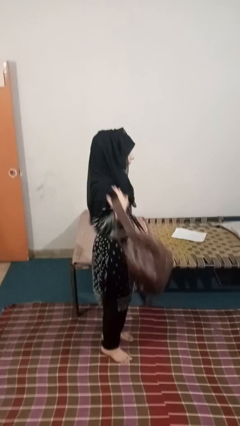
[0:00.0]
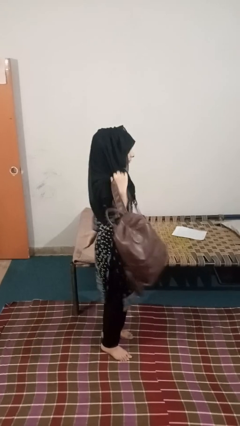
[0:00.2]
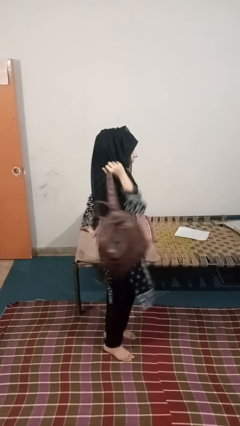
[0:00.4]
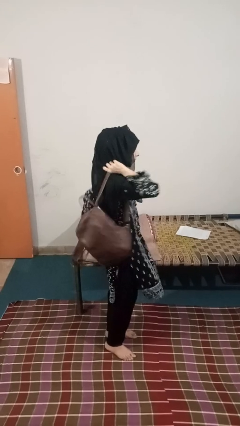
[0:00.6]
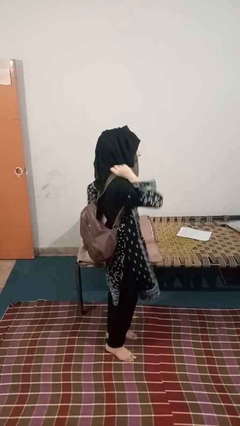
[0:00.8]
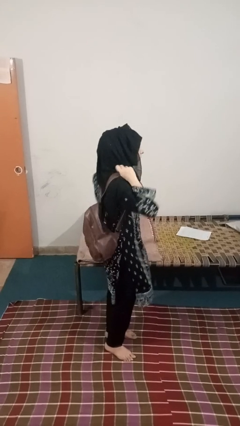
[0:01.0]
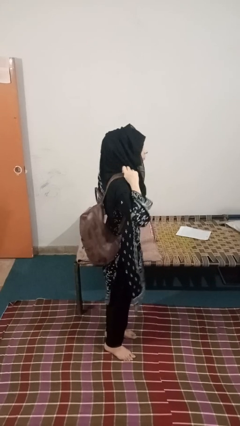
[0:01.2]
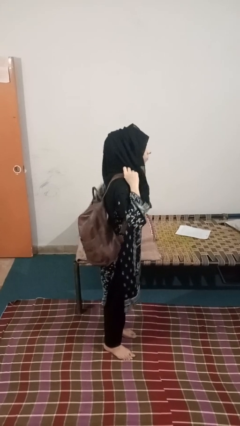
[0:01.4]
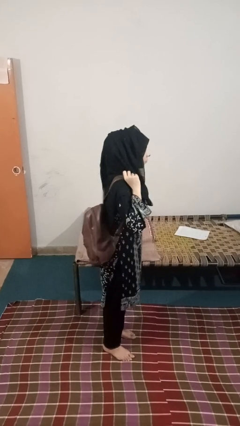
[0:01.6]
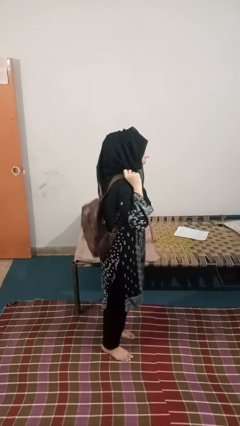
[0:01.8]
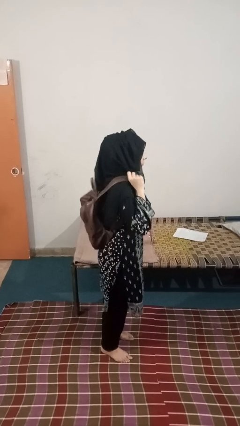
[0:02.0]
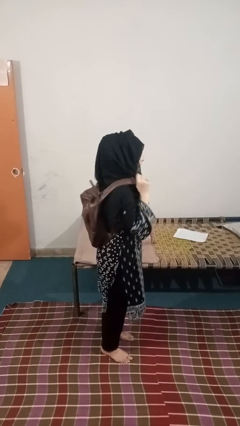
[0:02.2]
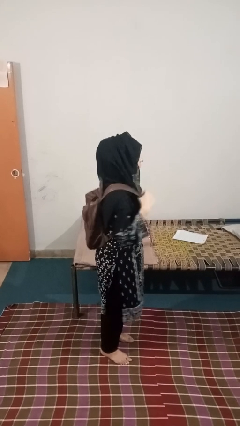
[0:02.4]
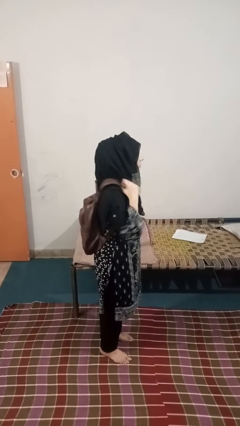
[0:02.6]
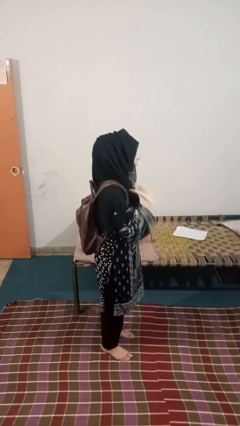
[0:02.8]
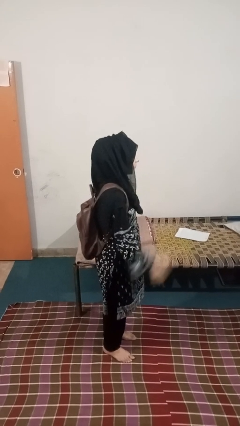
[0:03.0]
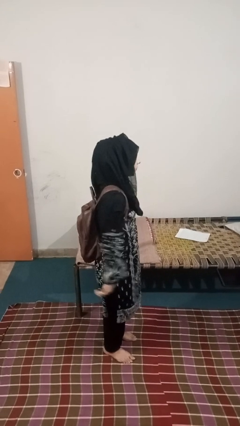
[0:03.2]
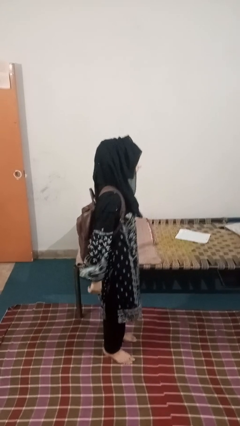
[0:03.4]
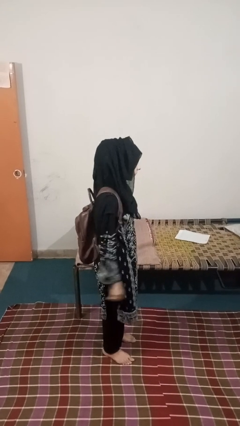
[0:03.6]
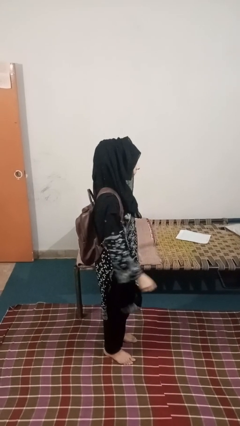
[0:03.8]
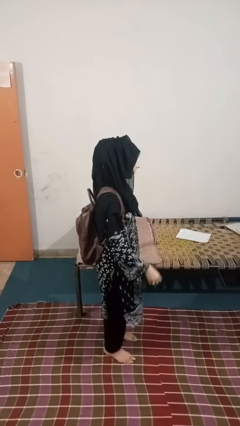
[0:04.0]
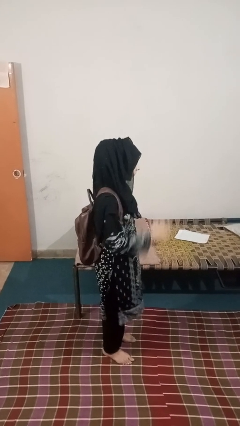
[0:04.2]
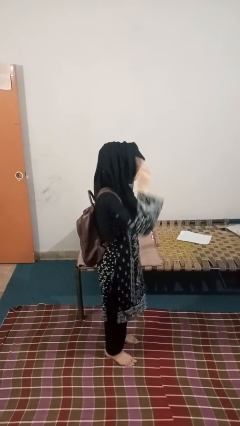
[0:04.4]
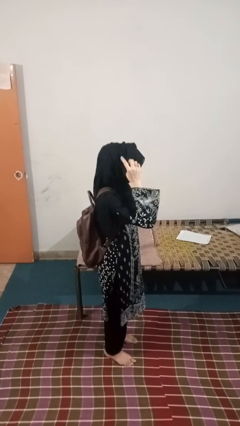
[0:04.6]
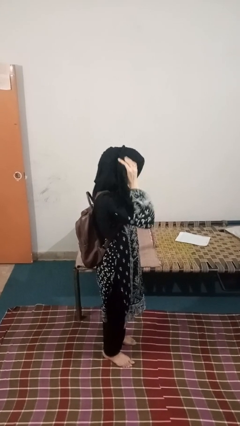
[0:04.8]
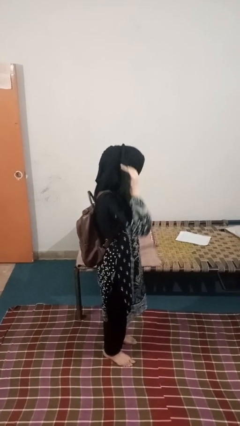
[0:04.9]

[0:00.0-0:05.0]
person puts on backpack

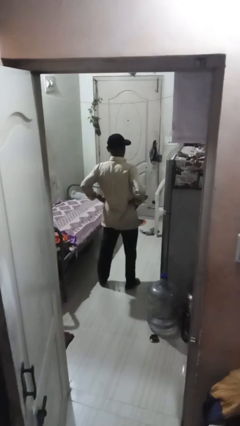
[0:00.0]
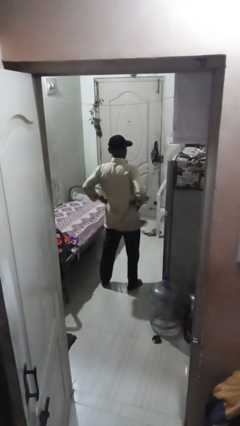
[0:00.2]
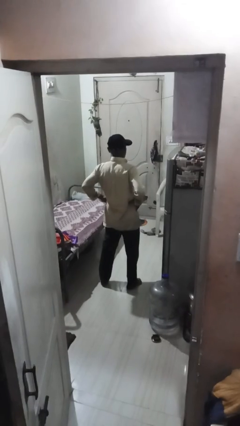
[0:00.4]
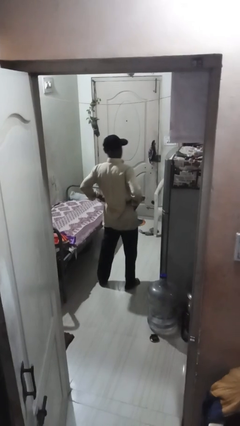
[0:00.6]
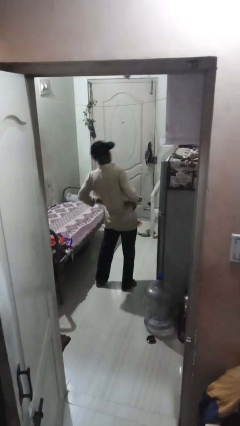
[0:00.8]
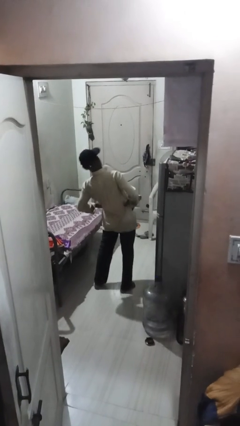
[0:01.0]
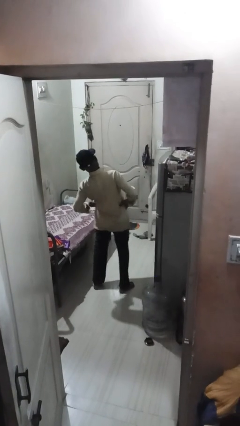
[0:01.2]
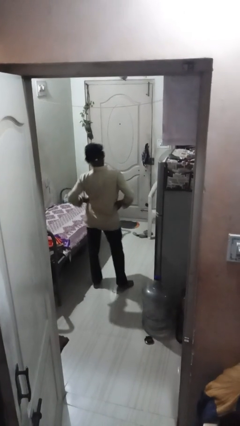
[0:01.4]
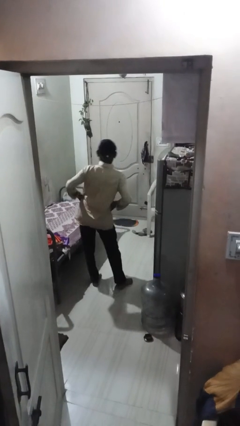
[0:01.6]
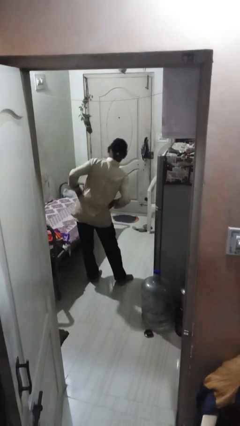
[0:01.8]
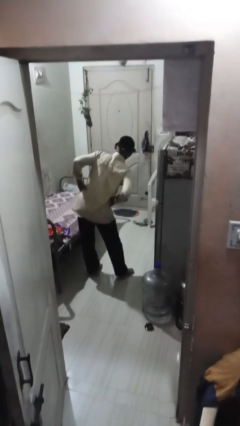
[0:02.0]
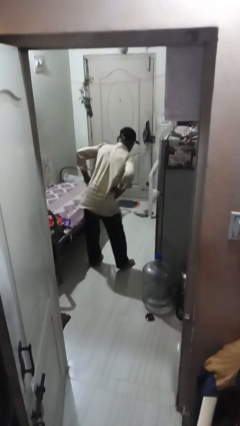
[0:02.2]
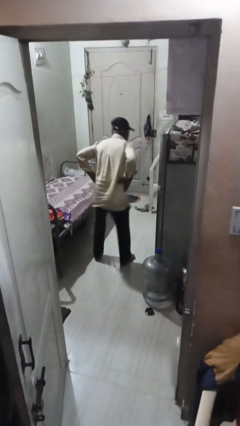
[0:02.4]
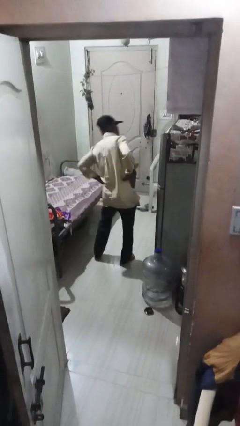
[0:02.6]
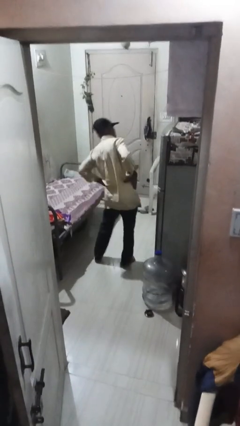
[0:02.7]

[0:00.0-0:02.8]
person wiggles hips

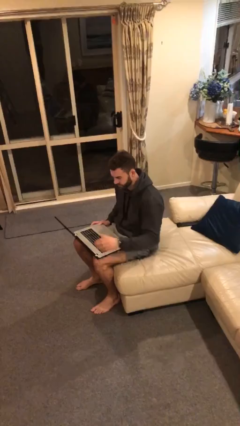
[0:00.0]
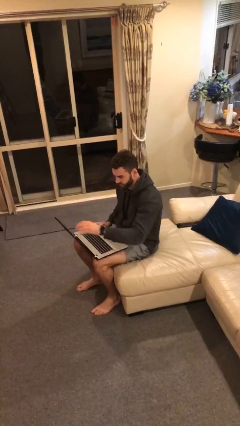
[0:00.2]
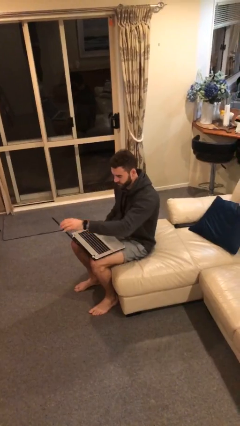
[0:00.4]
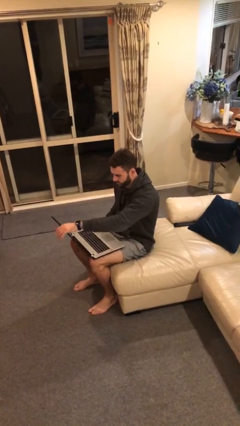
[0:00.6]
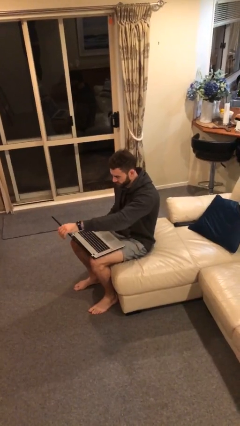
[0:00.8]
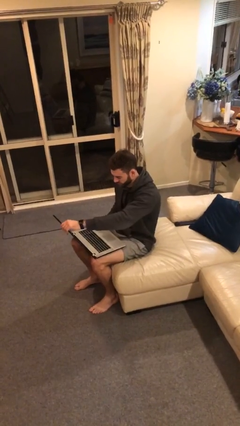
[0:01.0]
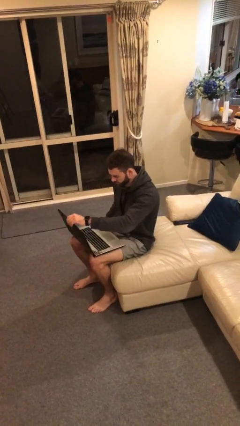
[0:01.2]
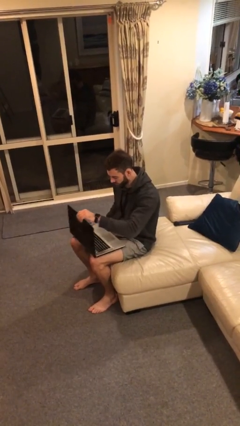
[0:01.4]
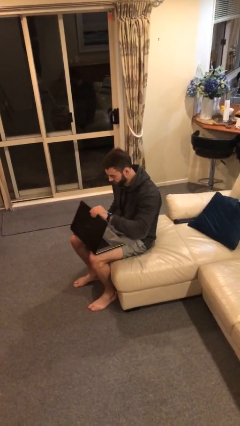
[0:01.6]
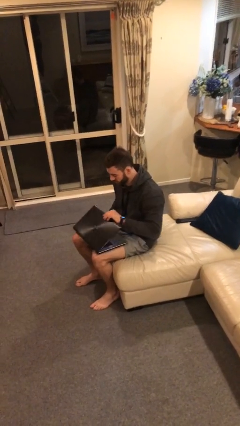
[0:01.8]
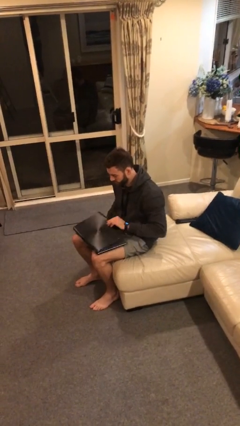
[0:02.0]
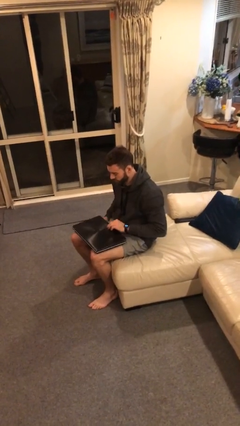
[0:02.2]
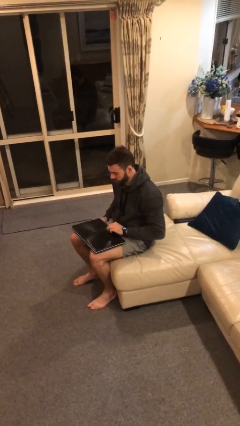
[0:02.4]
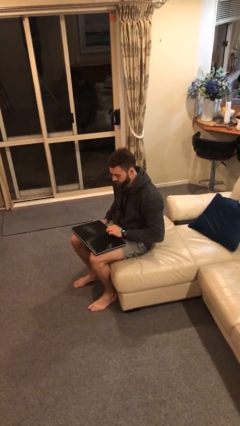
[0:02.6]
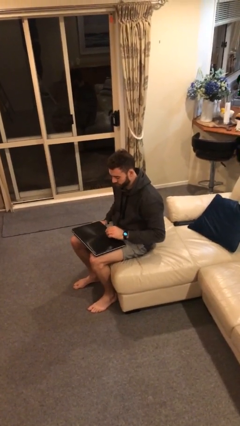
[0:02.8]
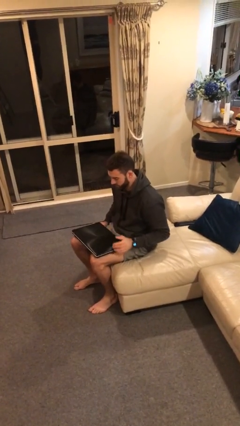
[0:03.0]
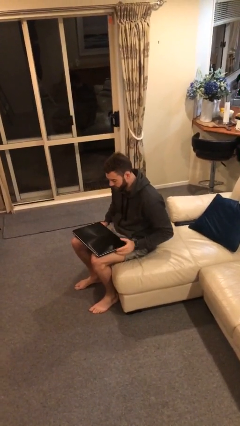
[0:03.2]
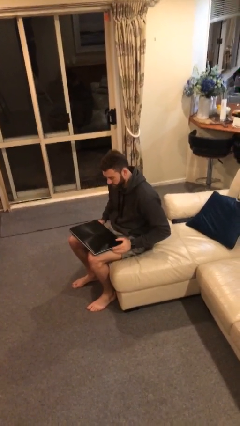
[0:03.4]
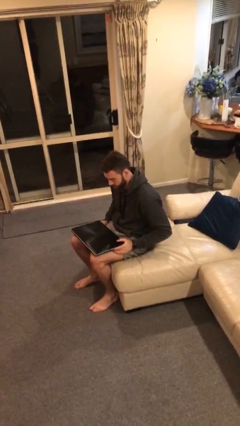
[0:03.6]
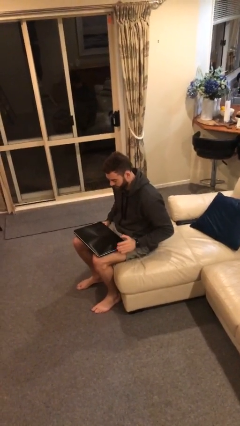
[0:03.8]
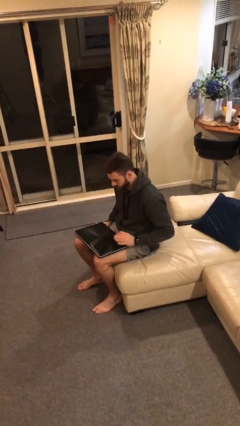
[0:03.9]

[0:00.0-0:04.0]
person closes laptop

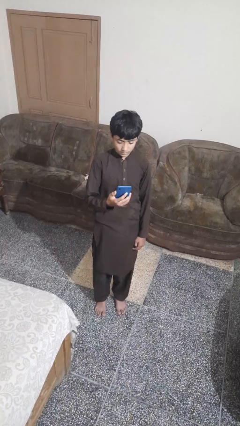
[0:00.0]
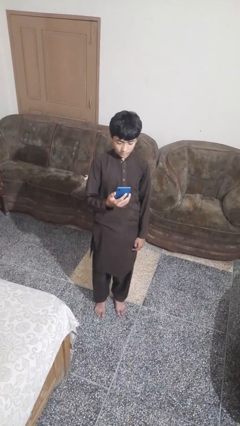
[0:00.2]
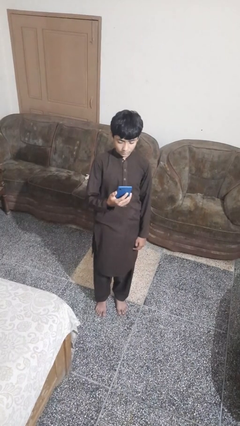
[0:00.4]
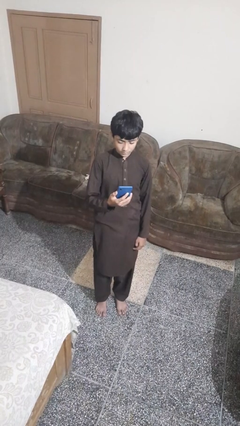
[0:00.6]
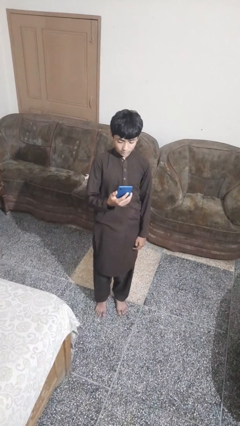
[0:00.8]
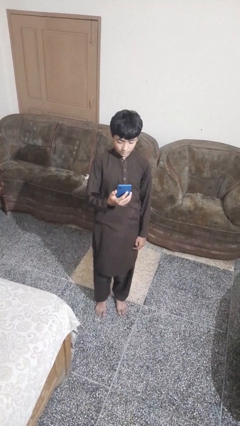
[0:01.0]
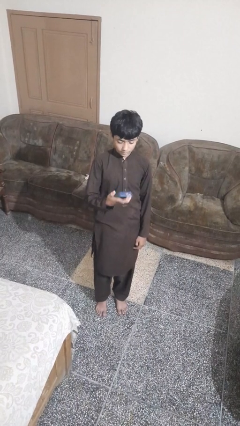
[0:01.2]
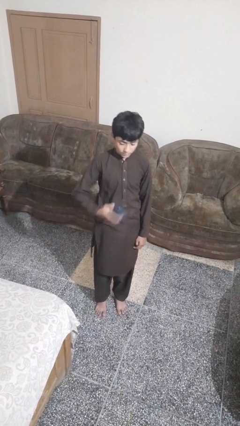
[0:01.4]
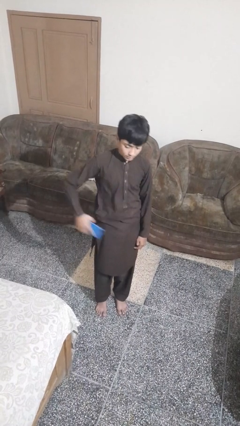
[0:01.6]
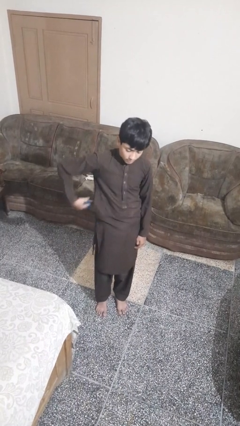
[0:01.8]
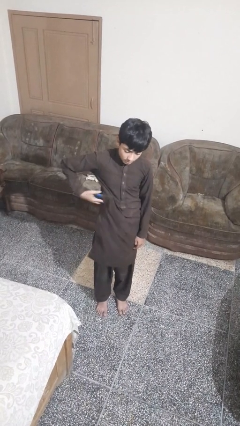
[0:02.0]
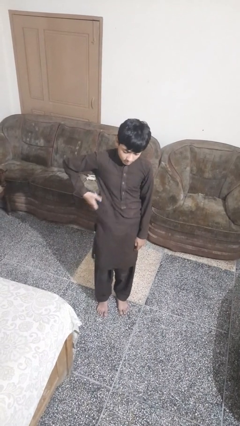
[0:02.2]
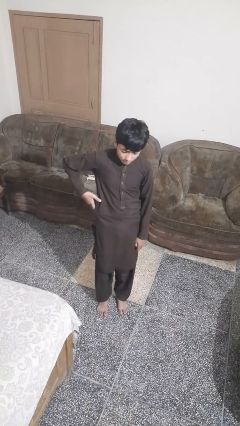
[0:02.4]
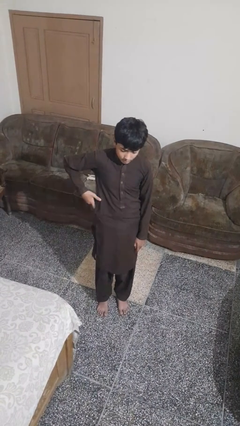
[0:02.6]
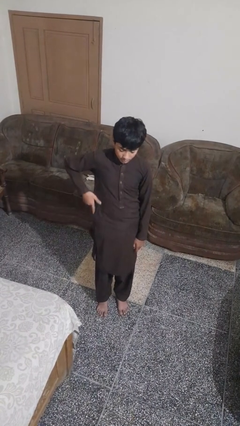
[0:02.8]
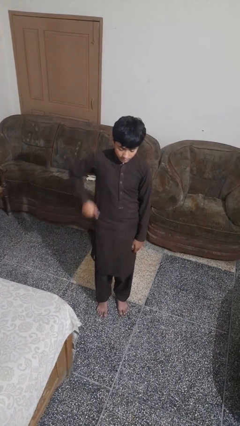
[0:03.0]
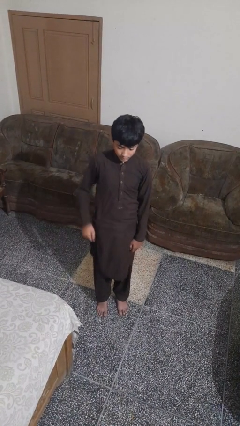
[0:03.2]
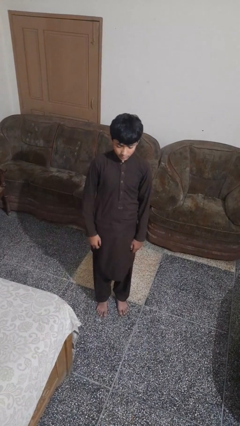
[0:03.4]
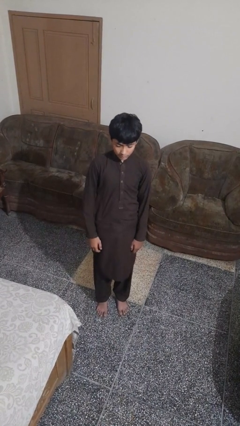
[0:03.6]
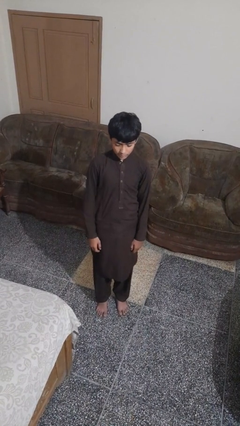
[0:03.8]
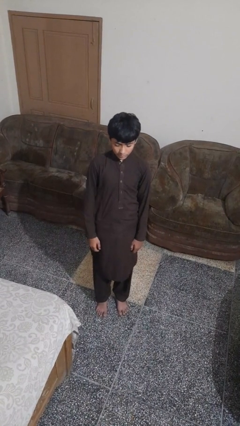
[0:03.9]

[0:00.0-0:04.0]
person puts phone into pocket

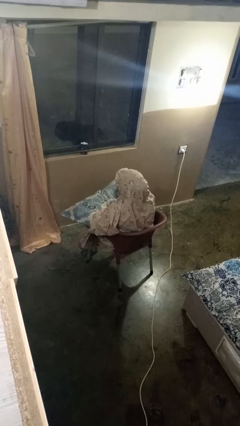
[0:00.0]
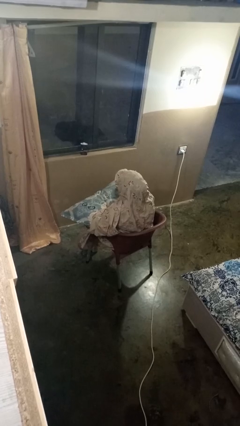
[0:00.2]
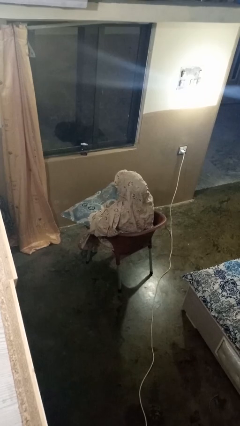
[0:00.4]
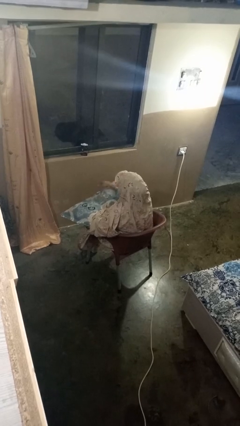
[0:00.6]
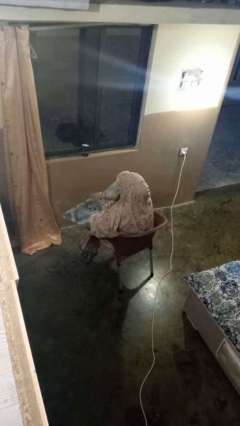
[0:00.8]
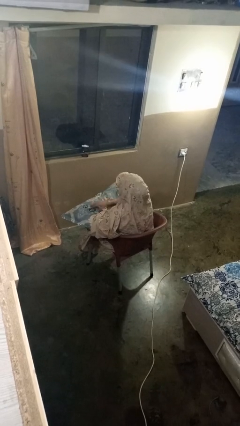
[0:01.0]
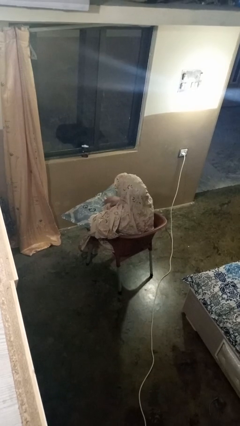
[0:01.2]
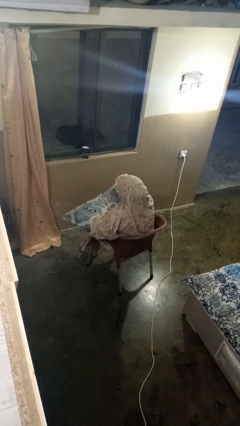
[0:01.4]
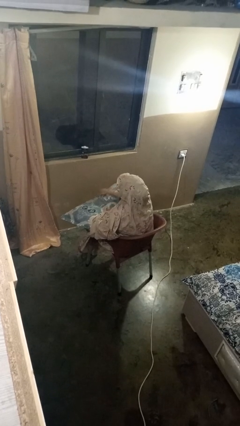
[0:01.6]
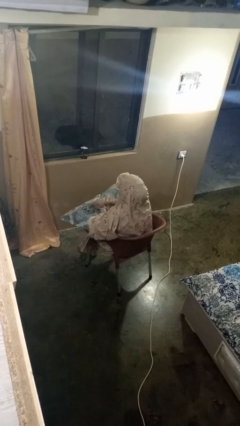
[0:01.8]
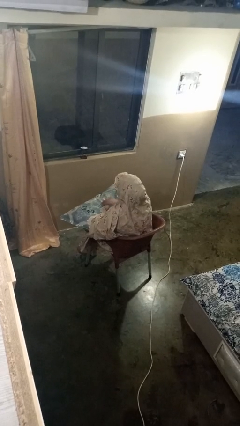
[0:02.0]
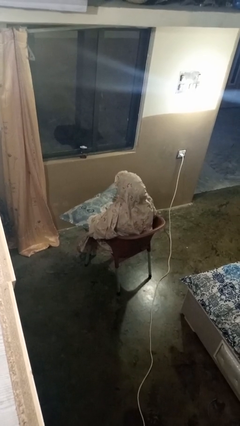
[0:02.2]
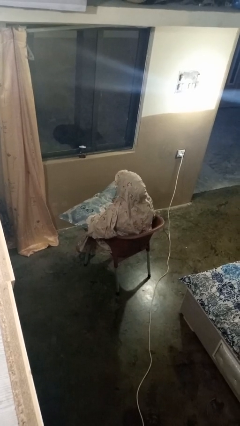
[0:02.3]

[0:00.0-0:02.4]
person waves hand over object
